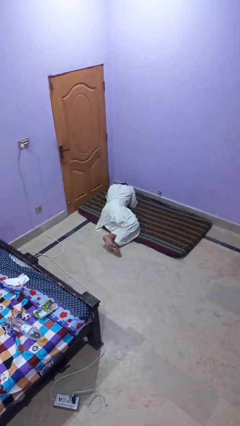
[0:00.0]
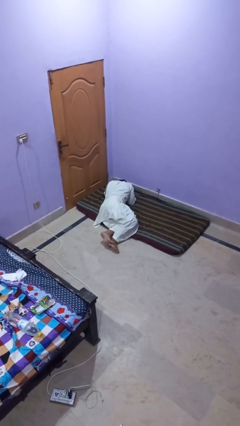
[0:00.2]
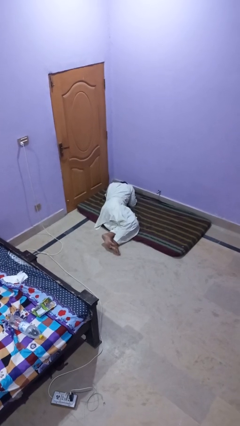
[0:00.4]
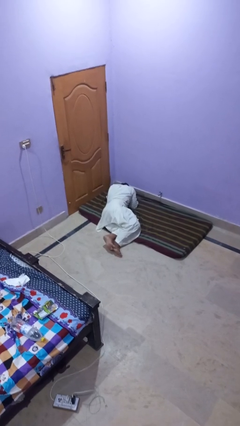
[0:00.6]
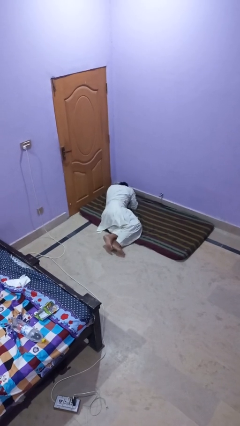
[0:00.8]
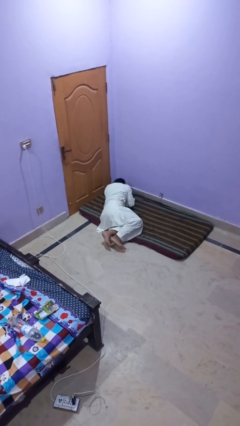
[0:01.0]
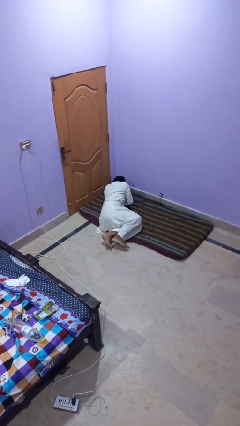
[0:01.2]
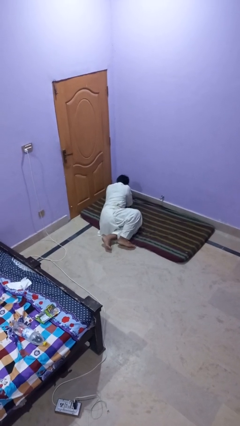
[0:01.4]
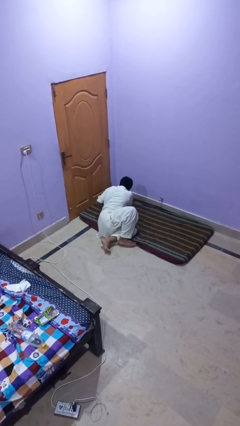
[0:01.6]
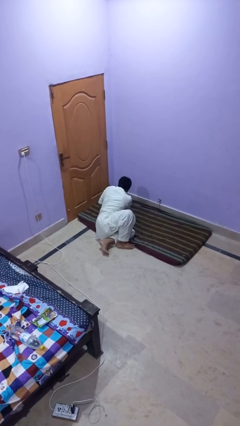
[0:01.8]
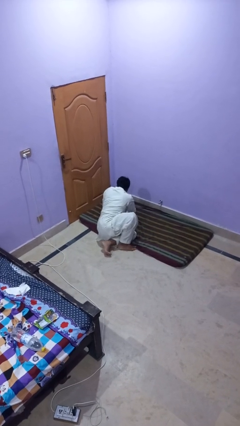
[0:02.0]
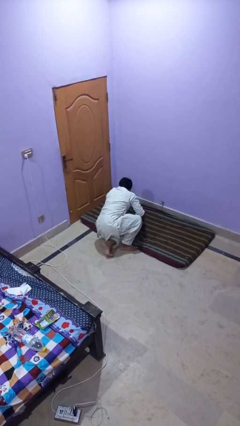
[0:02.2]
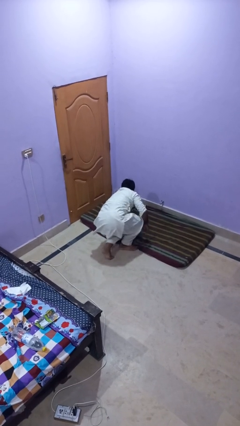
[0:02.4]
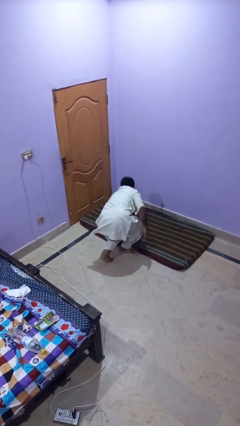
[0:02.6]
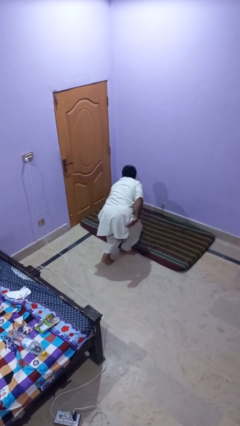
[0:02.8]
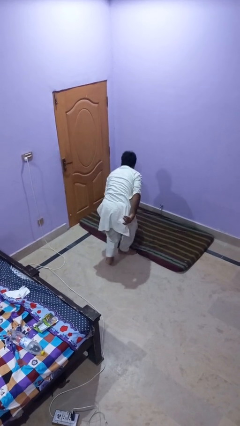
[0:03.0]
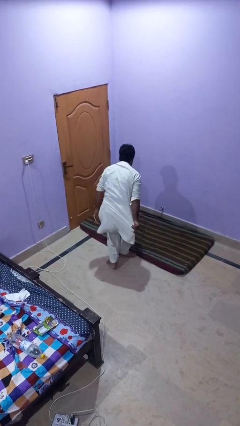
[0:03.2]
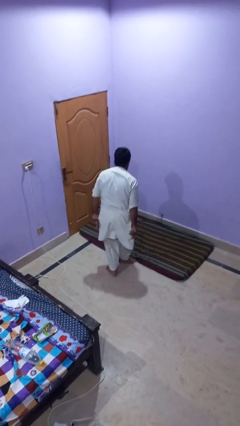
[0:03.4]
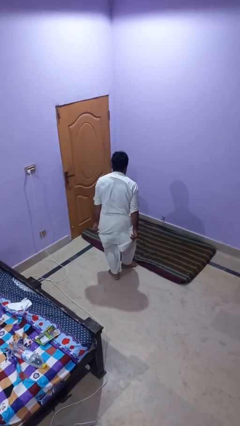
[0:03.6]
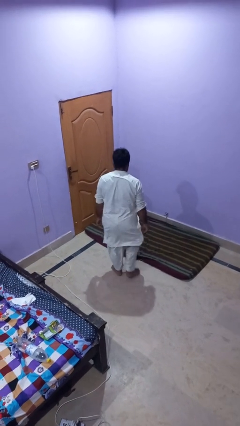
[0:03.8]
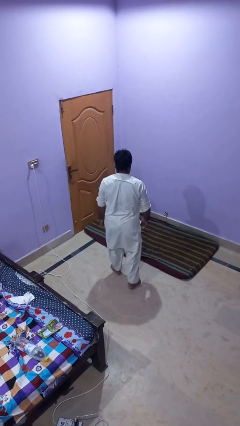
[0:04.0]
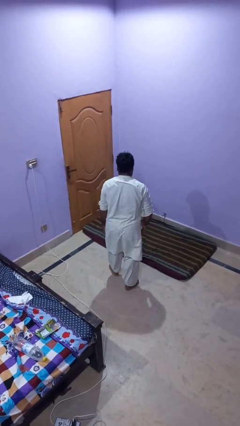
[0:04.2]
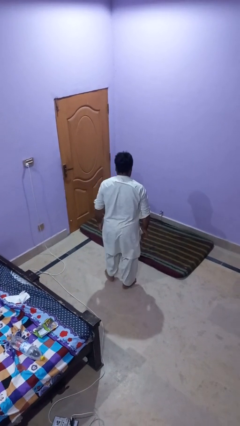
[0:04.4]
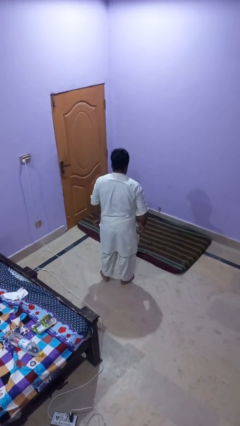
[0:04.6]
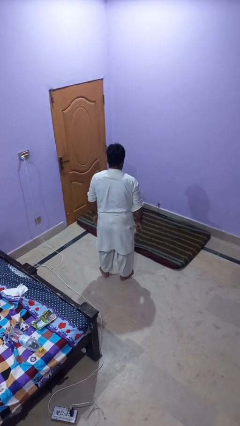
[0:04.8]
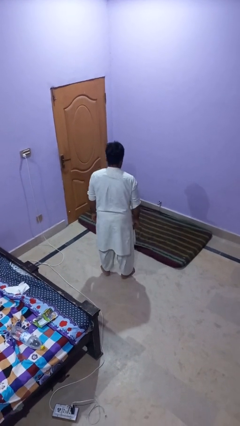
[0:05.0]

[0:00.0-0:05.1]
person stands up from floor

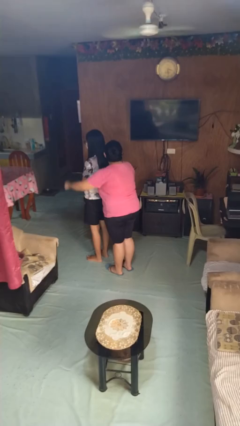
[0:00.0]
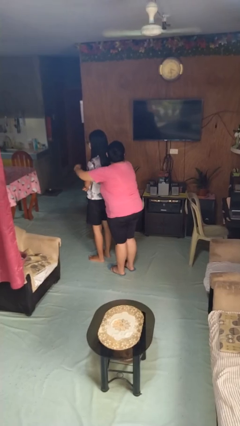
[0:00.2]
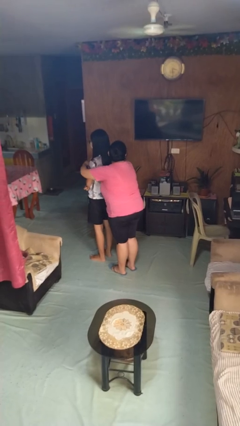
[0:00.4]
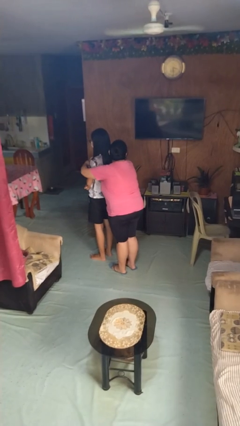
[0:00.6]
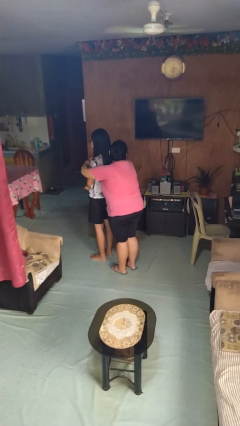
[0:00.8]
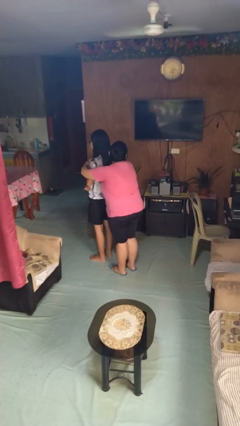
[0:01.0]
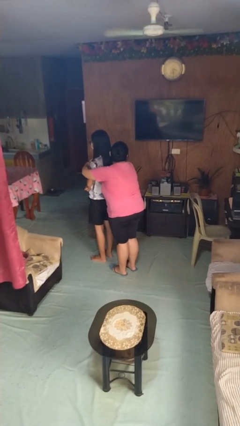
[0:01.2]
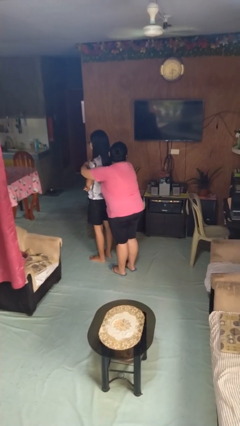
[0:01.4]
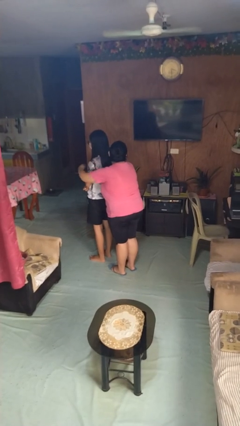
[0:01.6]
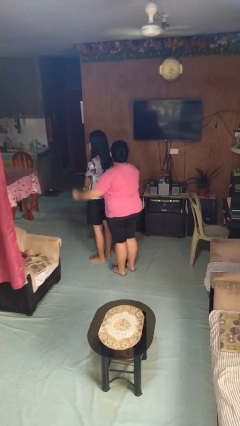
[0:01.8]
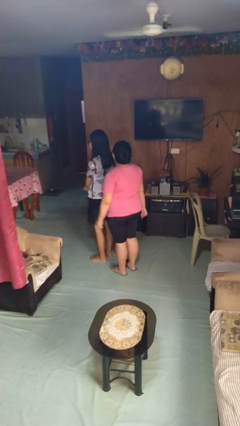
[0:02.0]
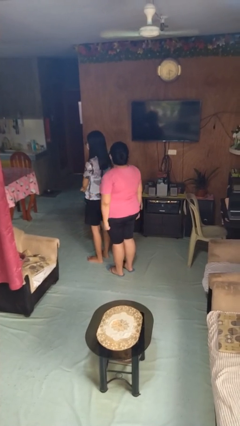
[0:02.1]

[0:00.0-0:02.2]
person hugs person from behind

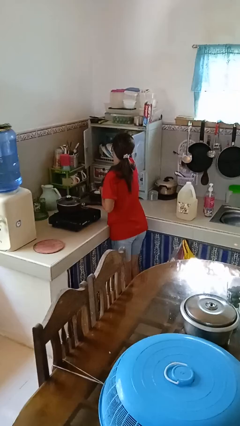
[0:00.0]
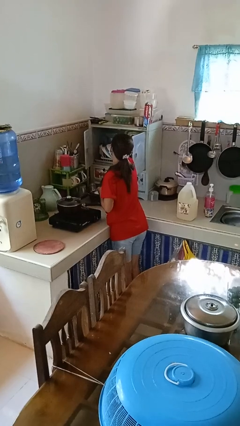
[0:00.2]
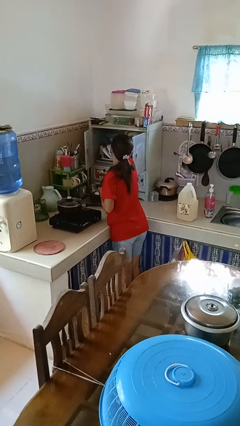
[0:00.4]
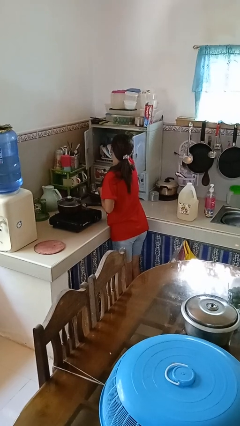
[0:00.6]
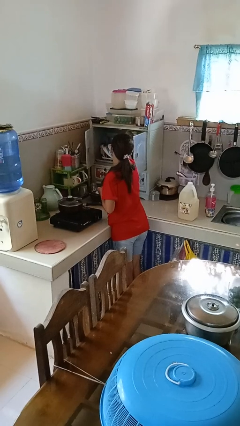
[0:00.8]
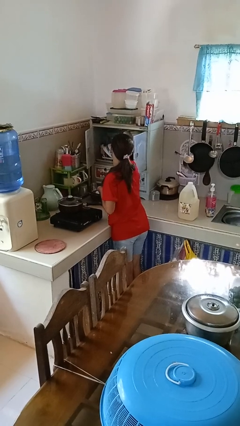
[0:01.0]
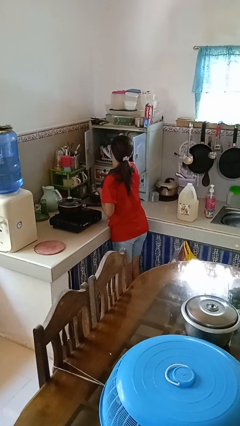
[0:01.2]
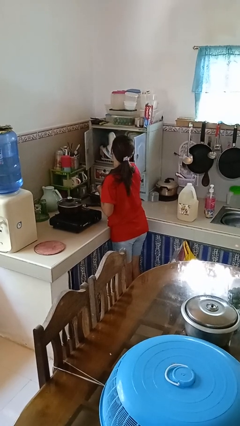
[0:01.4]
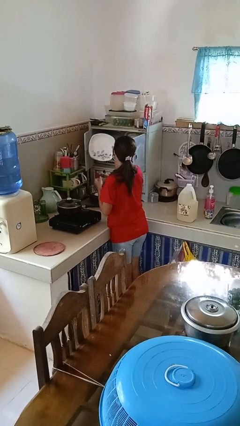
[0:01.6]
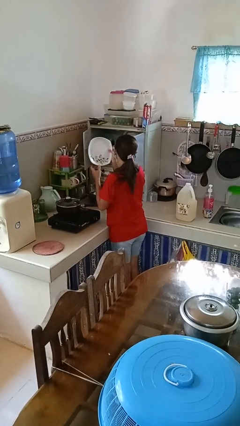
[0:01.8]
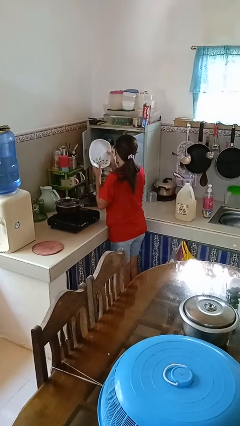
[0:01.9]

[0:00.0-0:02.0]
person takes object from cabinet

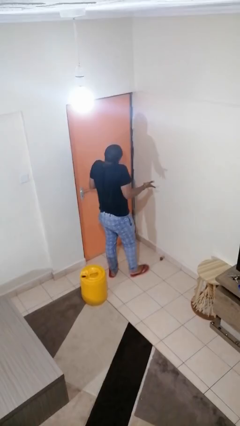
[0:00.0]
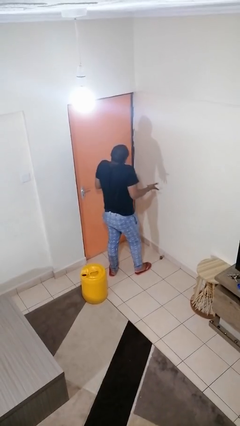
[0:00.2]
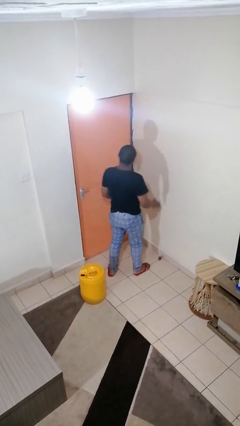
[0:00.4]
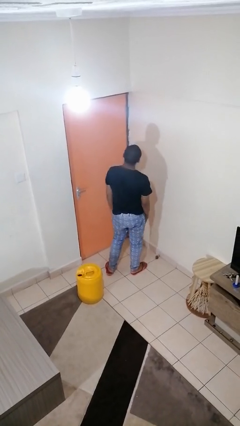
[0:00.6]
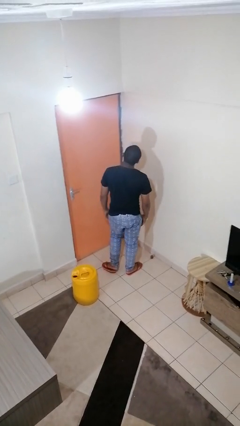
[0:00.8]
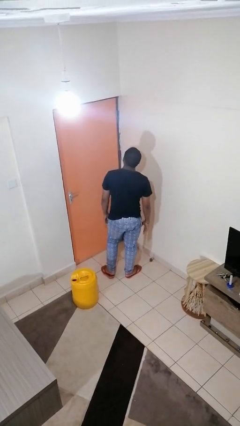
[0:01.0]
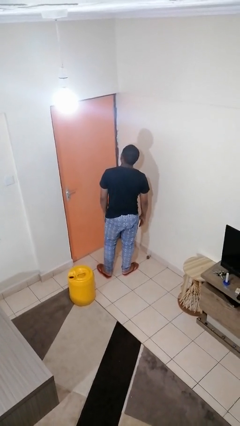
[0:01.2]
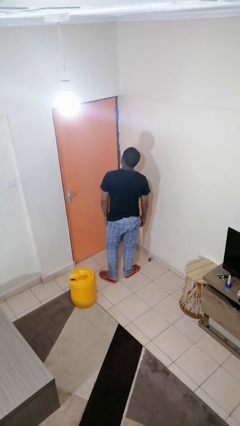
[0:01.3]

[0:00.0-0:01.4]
person shrugs

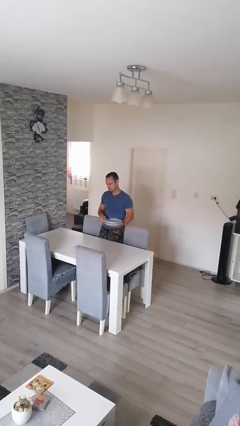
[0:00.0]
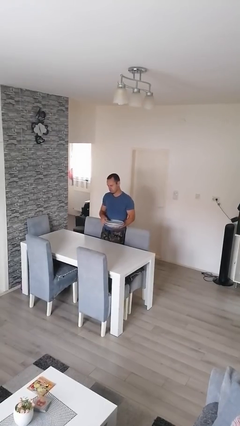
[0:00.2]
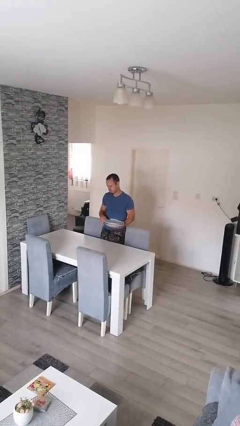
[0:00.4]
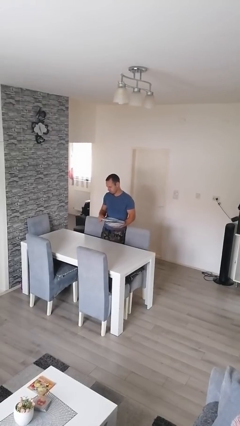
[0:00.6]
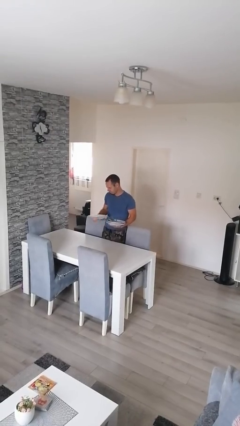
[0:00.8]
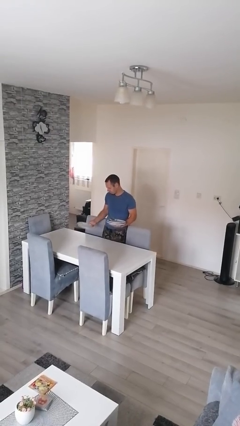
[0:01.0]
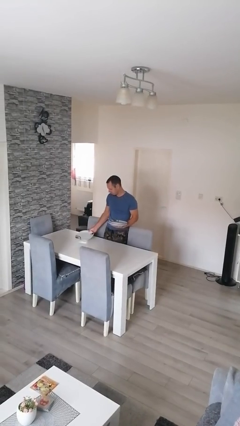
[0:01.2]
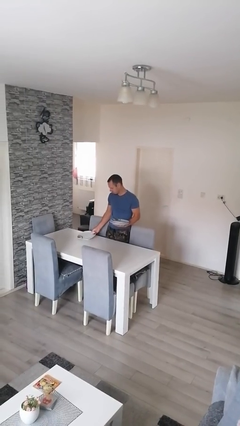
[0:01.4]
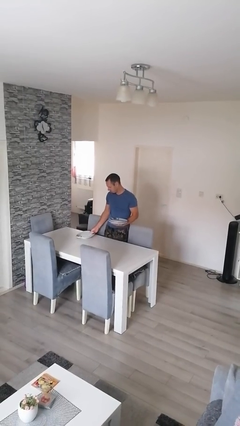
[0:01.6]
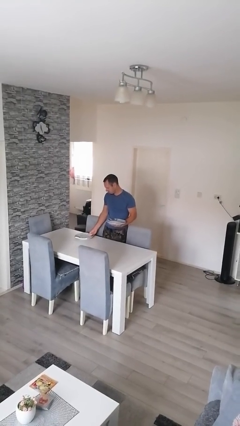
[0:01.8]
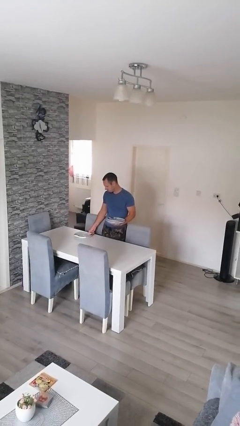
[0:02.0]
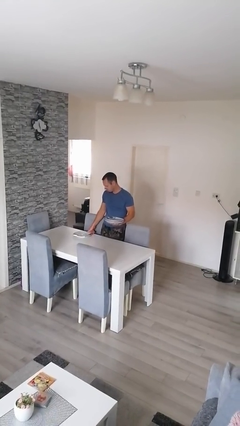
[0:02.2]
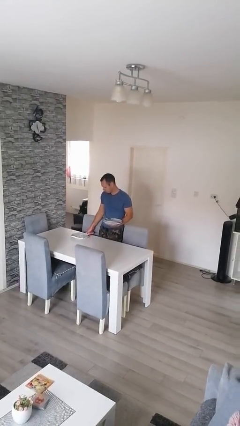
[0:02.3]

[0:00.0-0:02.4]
person sets table

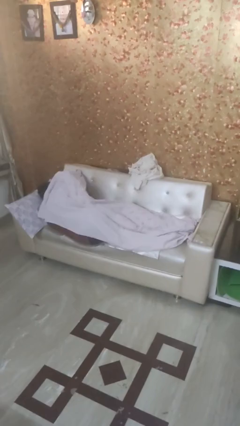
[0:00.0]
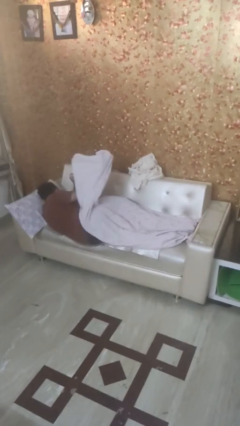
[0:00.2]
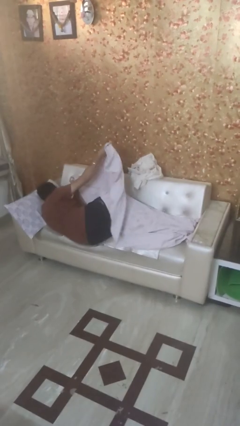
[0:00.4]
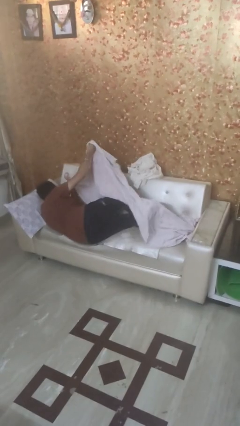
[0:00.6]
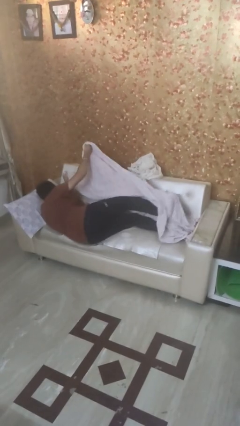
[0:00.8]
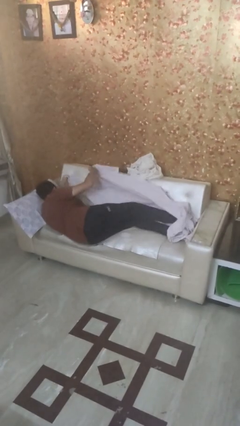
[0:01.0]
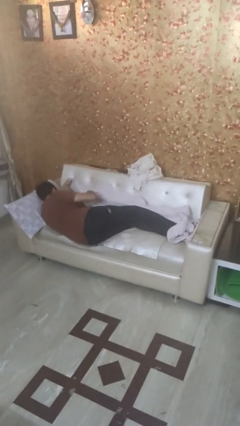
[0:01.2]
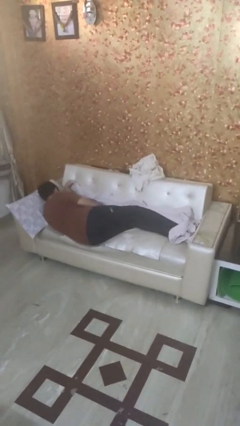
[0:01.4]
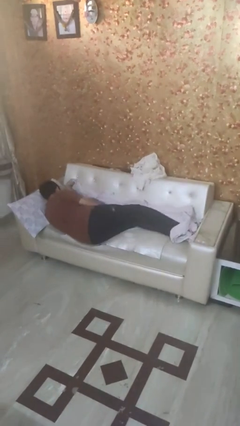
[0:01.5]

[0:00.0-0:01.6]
person uncovers with bedsheets

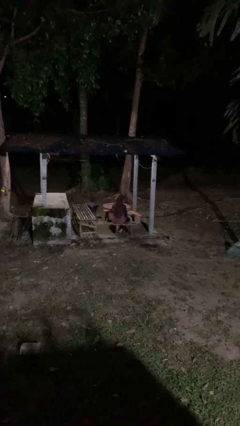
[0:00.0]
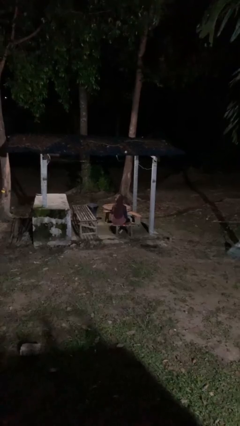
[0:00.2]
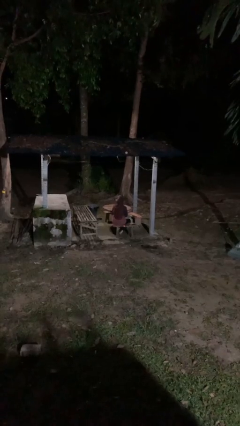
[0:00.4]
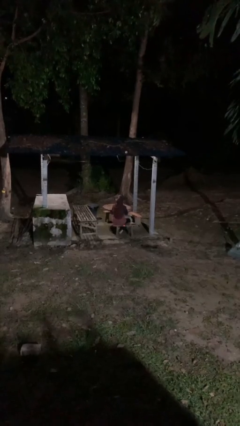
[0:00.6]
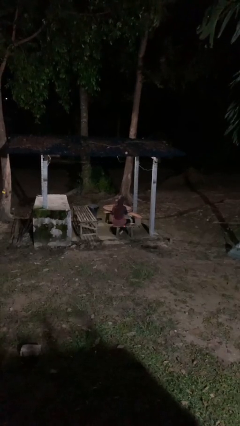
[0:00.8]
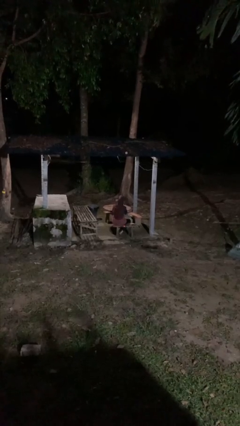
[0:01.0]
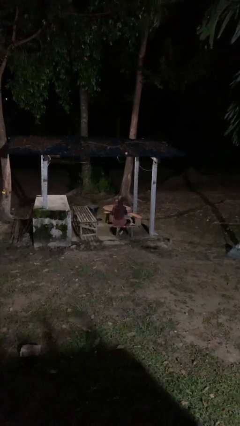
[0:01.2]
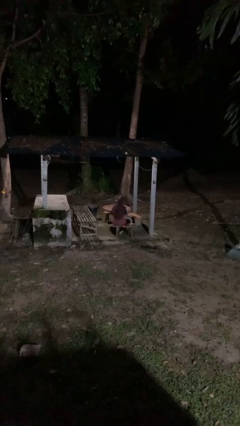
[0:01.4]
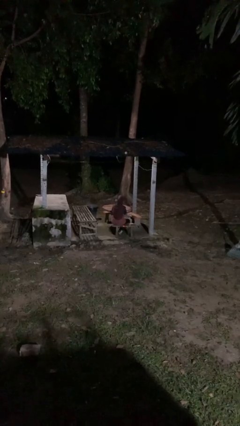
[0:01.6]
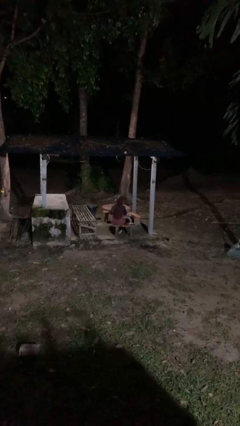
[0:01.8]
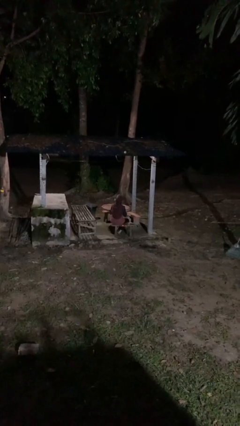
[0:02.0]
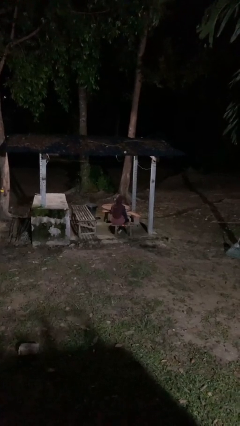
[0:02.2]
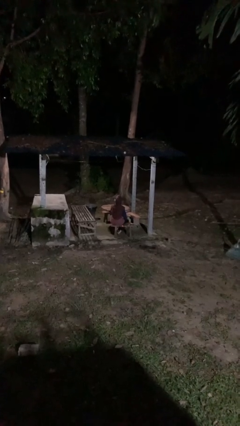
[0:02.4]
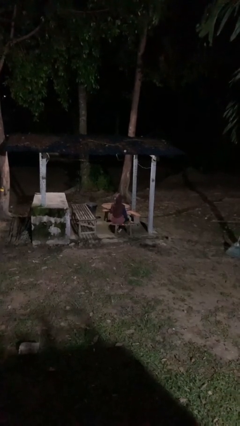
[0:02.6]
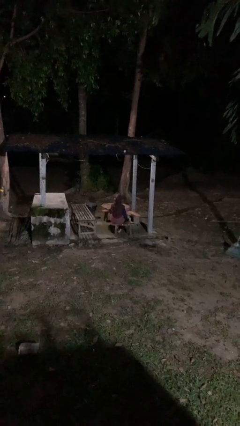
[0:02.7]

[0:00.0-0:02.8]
person strokes chin
